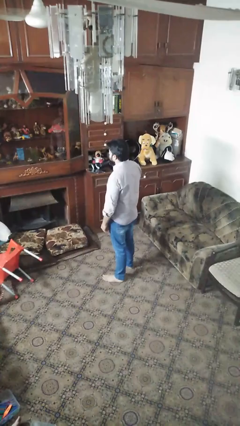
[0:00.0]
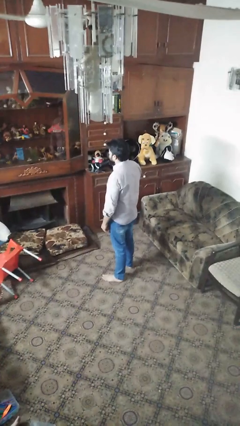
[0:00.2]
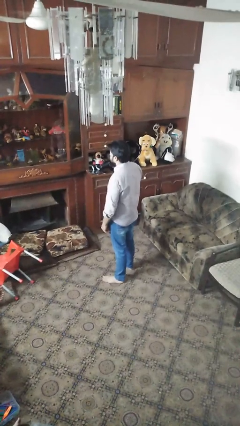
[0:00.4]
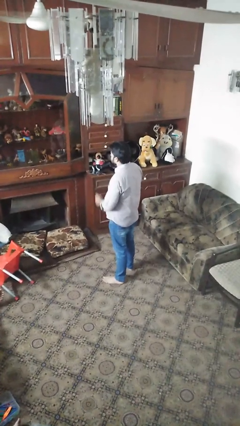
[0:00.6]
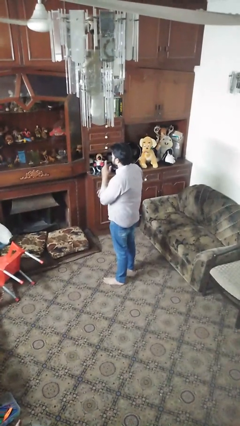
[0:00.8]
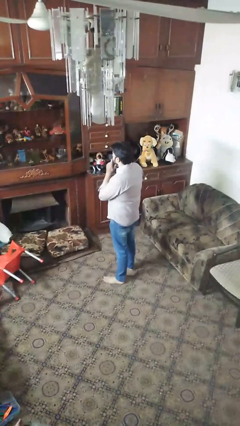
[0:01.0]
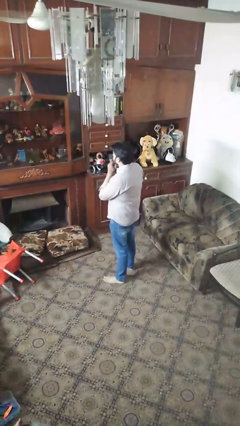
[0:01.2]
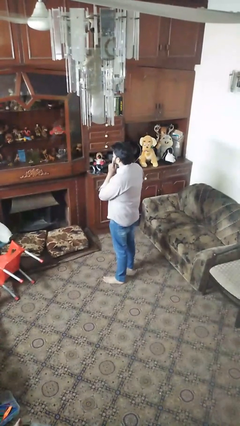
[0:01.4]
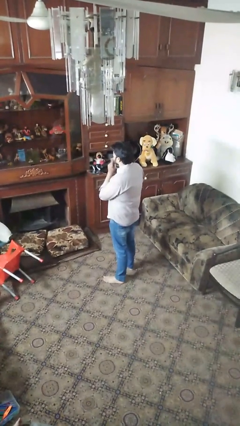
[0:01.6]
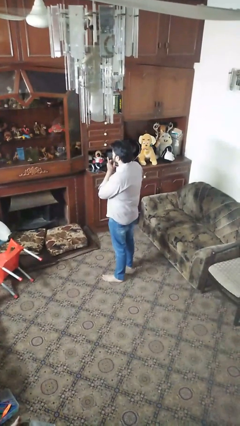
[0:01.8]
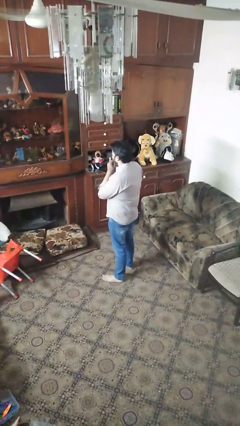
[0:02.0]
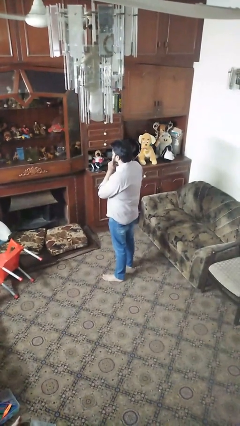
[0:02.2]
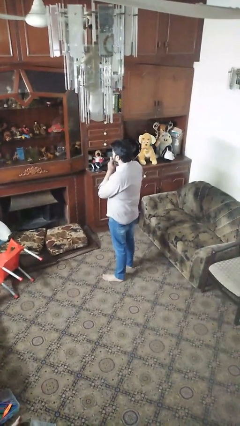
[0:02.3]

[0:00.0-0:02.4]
person strokes chin

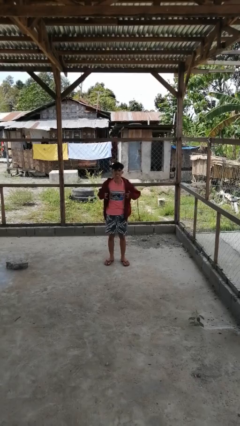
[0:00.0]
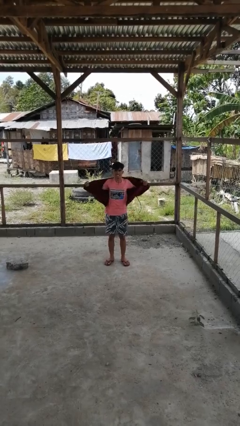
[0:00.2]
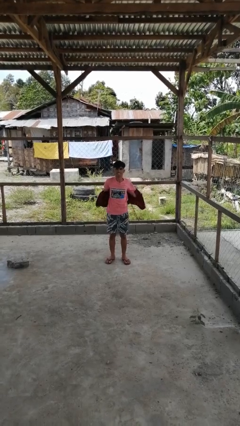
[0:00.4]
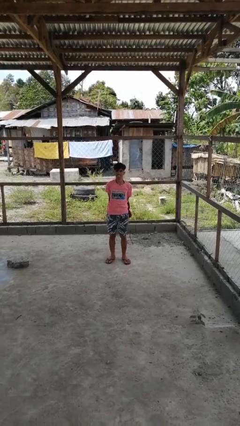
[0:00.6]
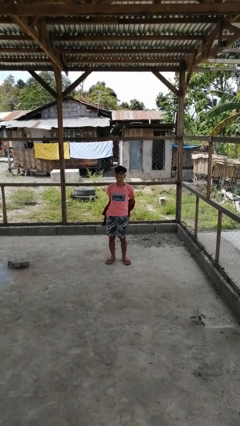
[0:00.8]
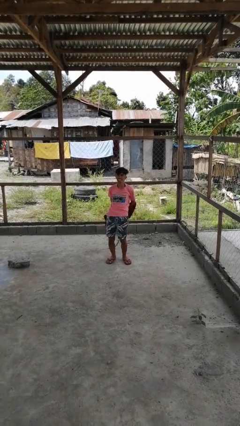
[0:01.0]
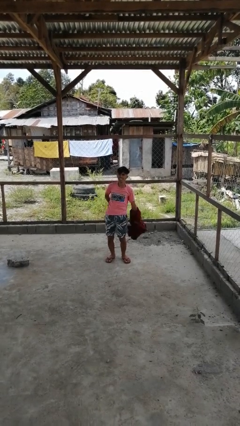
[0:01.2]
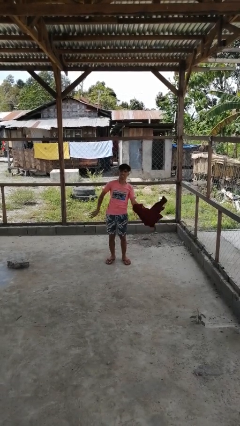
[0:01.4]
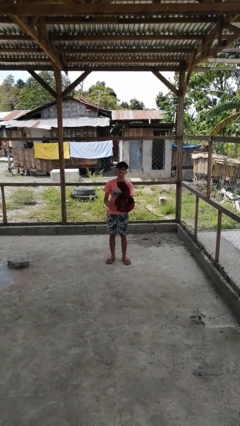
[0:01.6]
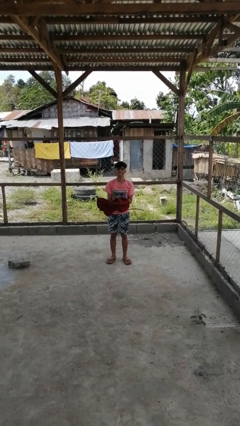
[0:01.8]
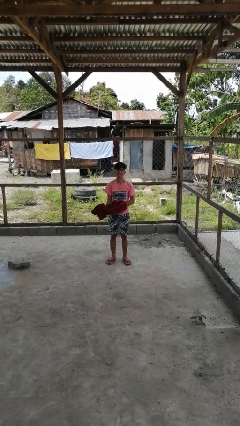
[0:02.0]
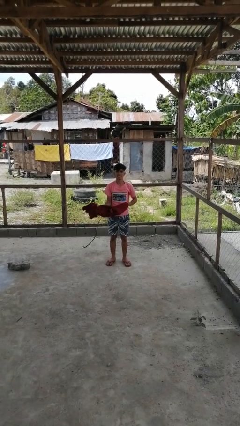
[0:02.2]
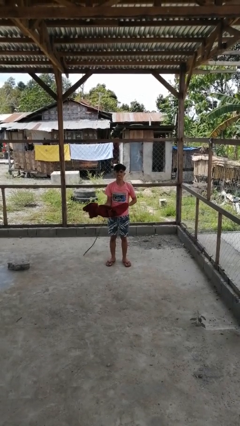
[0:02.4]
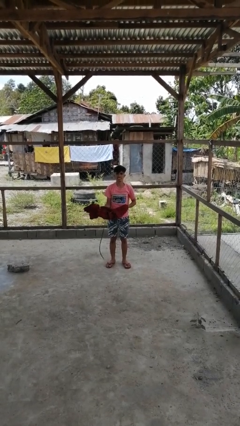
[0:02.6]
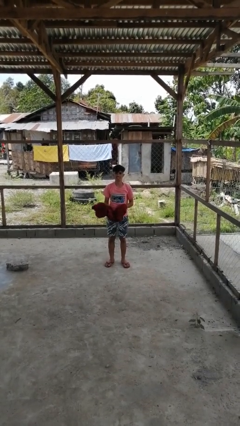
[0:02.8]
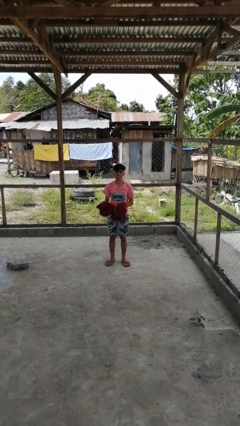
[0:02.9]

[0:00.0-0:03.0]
person takes off jacket

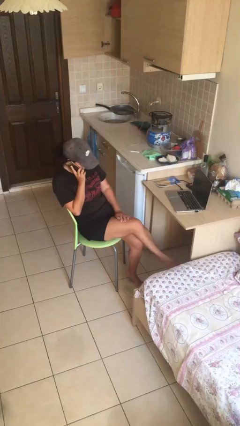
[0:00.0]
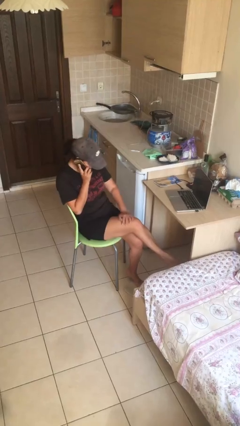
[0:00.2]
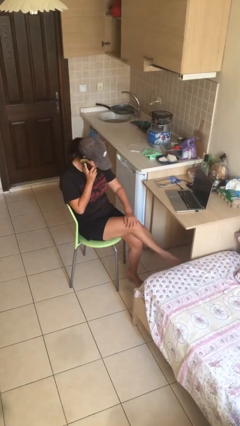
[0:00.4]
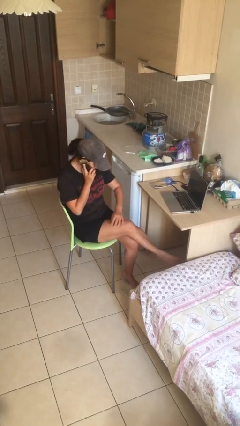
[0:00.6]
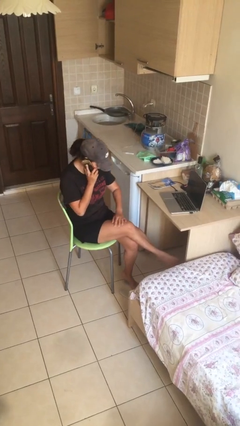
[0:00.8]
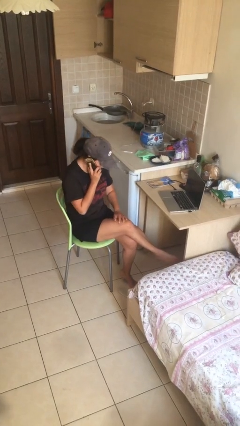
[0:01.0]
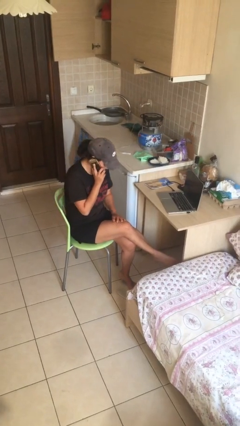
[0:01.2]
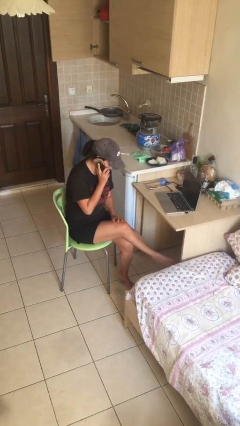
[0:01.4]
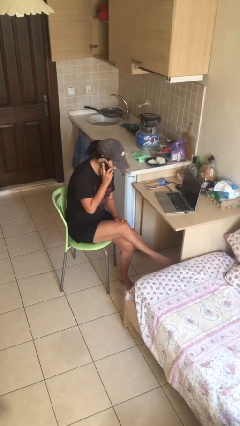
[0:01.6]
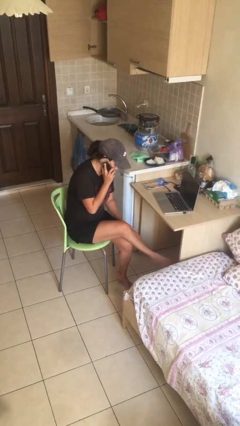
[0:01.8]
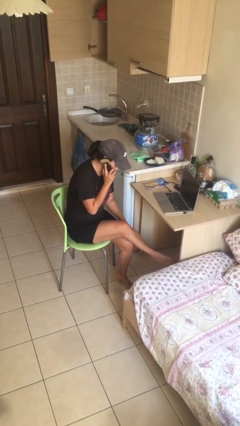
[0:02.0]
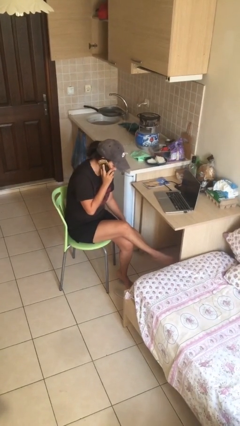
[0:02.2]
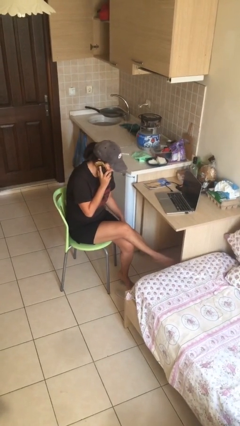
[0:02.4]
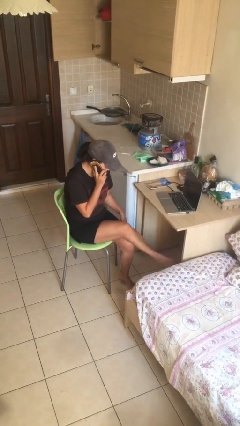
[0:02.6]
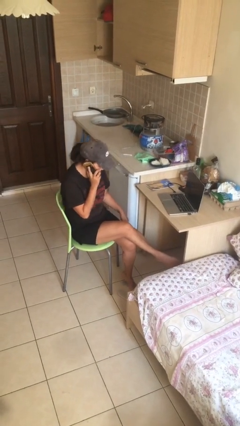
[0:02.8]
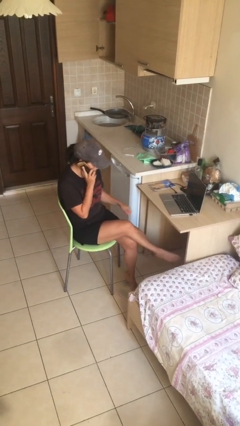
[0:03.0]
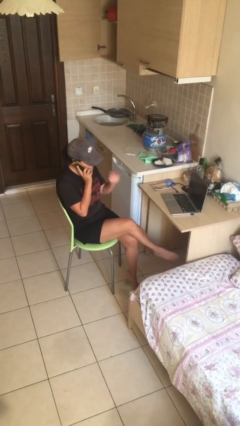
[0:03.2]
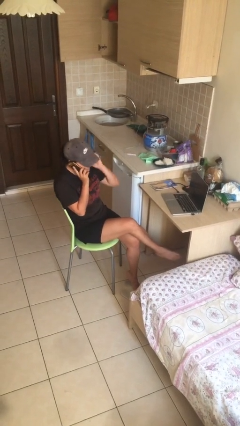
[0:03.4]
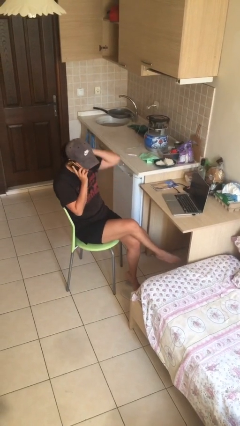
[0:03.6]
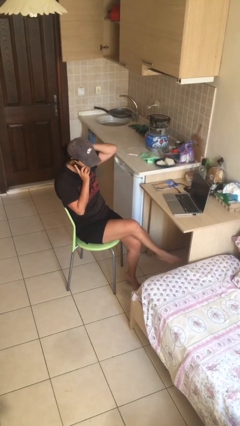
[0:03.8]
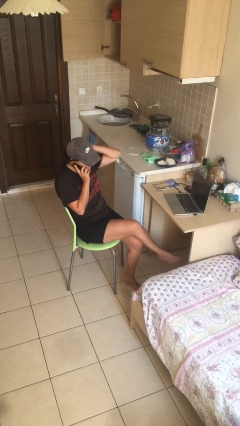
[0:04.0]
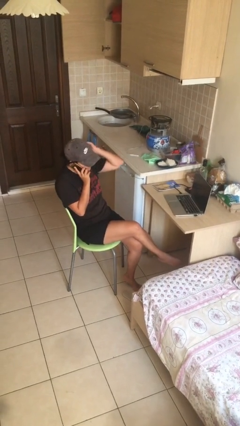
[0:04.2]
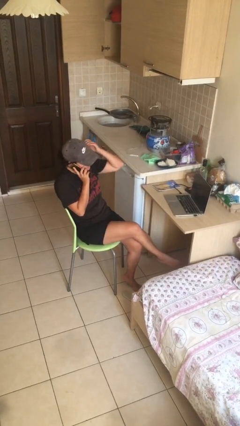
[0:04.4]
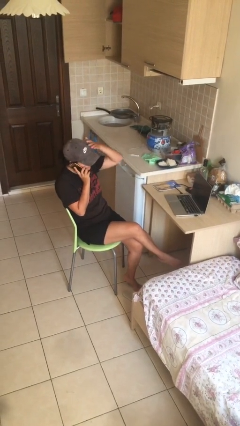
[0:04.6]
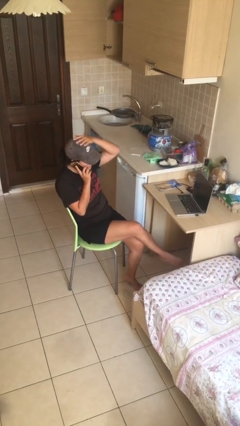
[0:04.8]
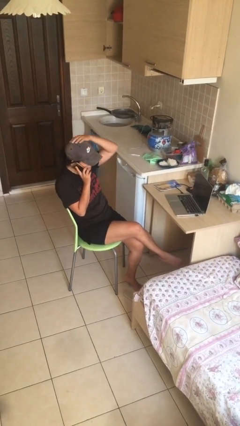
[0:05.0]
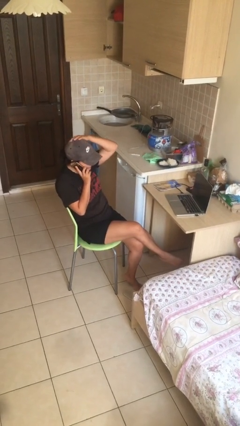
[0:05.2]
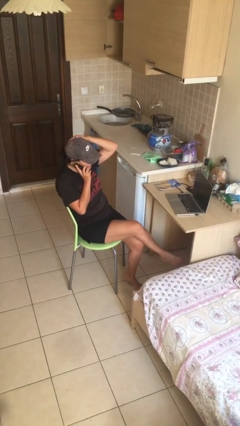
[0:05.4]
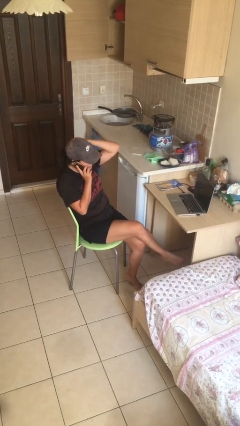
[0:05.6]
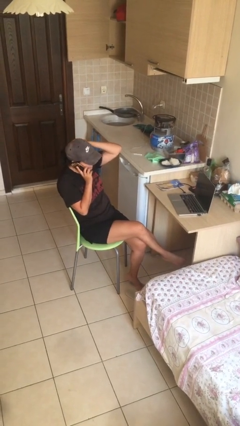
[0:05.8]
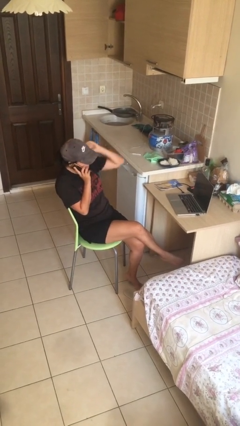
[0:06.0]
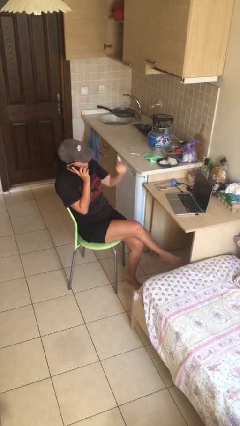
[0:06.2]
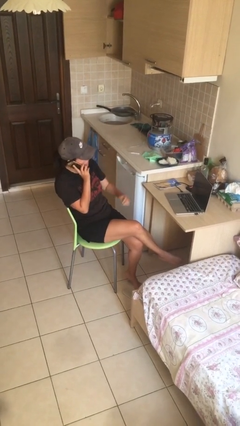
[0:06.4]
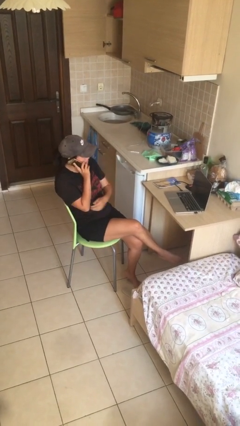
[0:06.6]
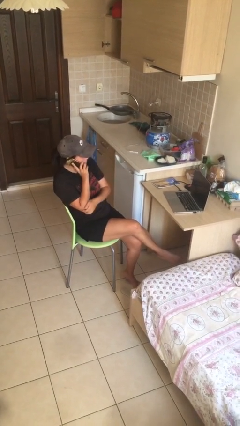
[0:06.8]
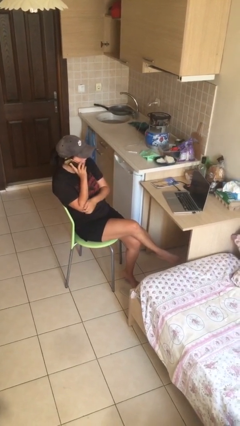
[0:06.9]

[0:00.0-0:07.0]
person talks on phone

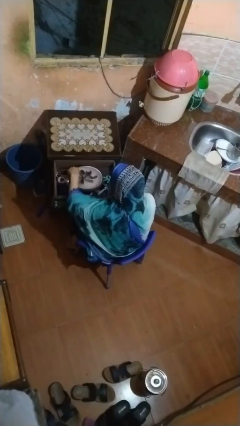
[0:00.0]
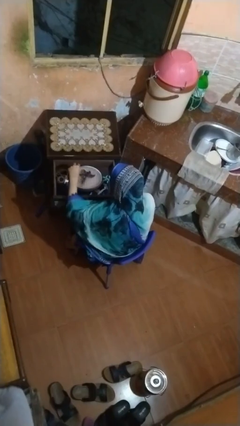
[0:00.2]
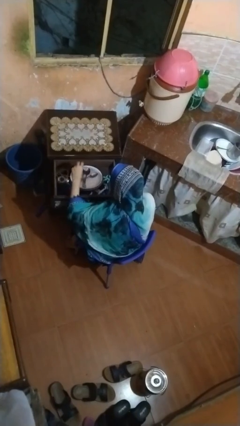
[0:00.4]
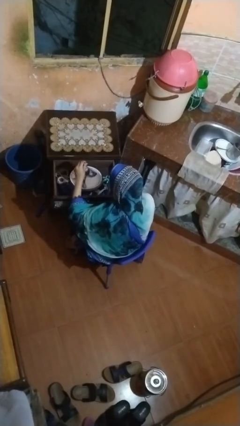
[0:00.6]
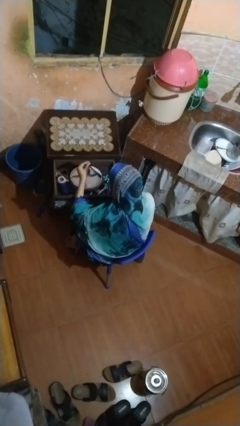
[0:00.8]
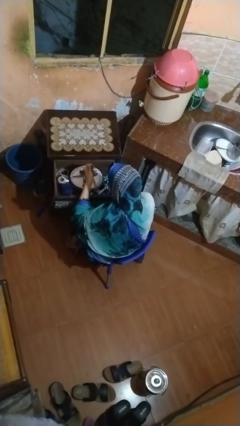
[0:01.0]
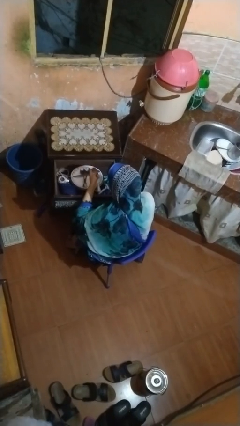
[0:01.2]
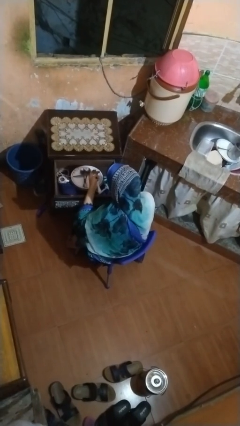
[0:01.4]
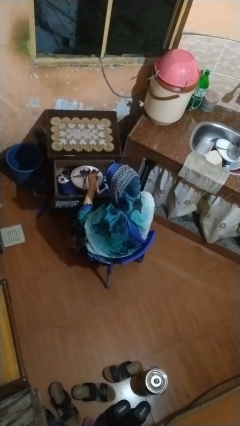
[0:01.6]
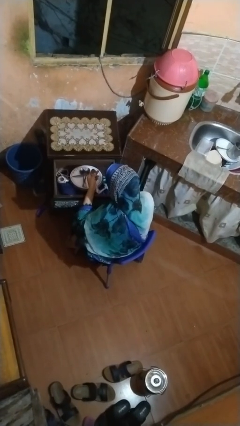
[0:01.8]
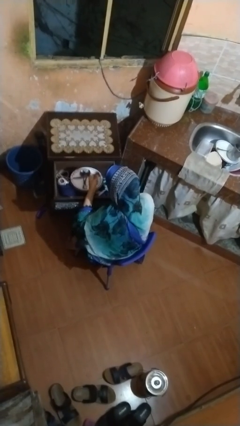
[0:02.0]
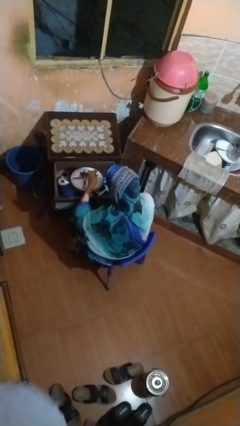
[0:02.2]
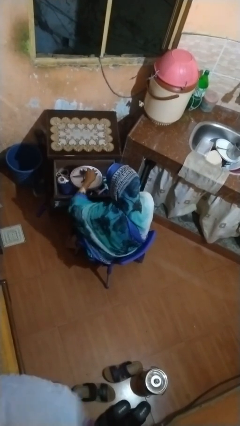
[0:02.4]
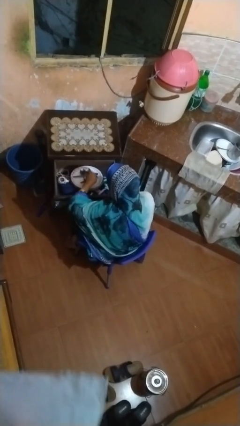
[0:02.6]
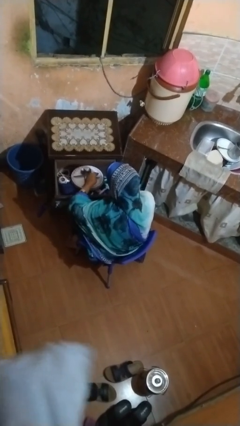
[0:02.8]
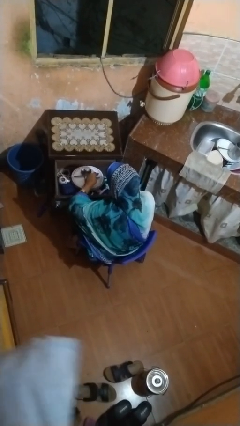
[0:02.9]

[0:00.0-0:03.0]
person takes object from kitchen drawer

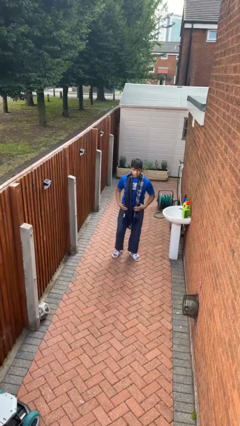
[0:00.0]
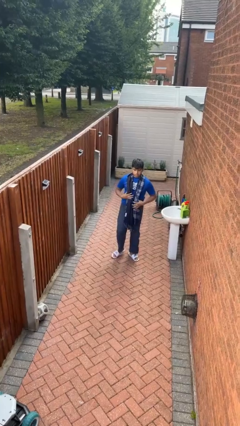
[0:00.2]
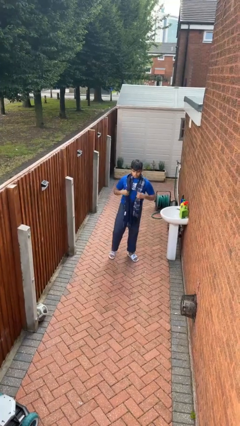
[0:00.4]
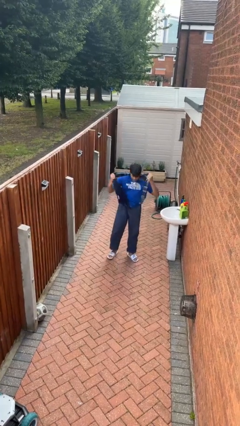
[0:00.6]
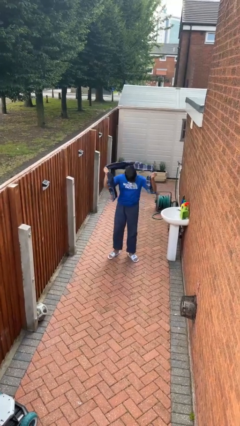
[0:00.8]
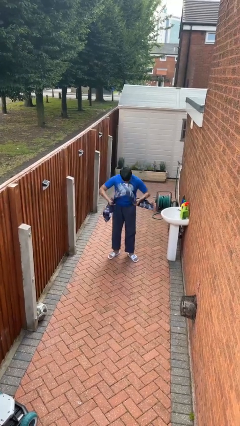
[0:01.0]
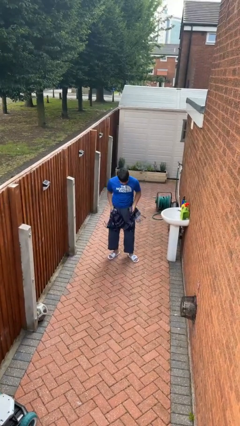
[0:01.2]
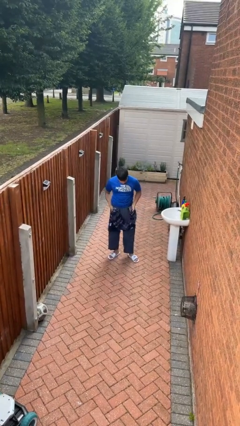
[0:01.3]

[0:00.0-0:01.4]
person takes off scarf

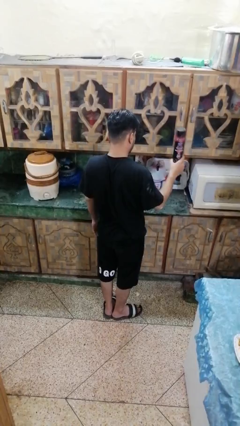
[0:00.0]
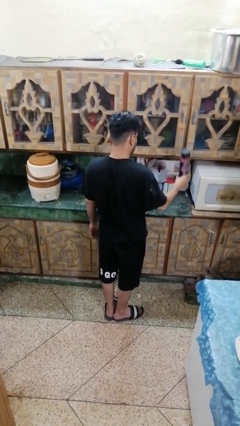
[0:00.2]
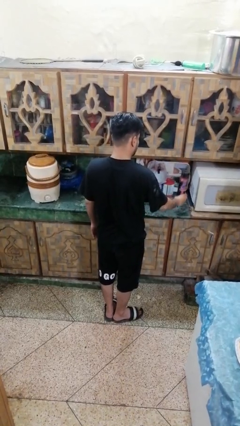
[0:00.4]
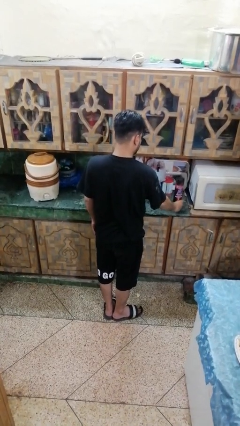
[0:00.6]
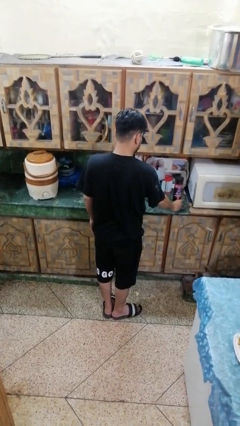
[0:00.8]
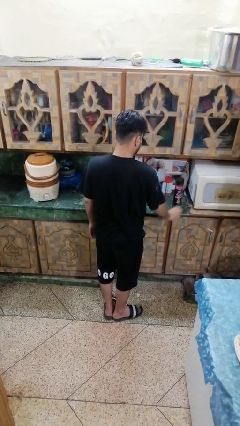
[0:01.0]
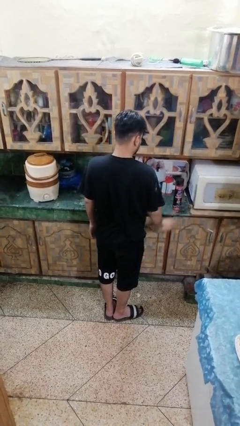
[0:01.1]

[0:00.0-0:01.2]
person puts down object on countertop
